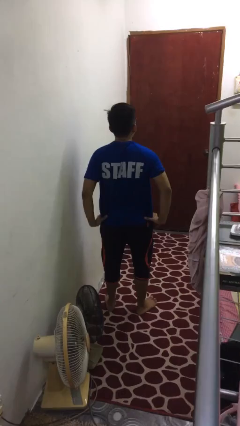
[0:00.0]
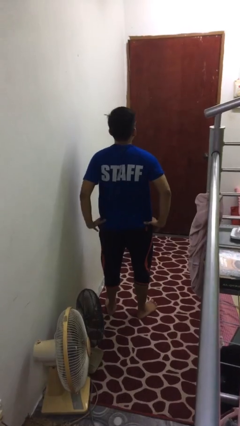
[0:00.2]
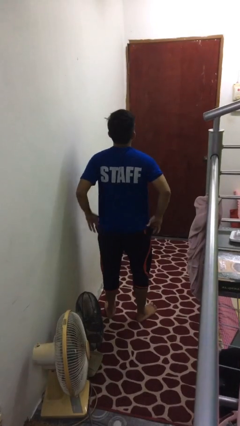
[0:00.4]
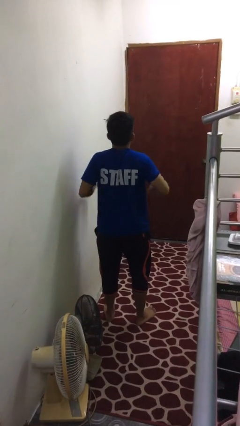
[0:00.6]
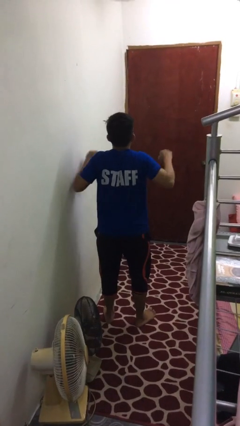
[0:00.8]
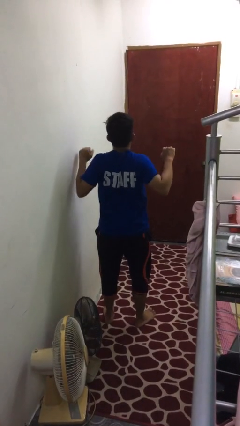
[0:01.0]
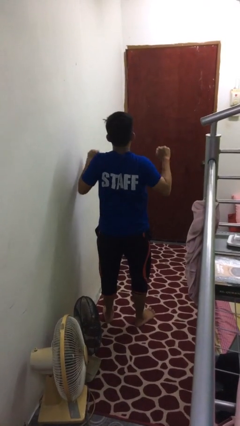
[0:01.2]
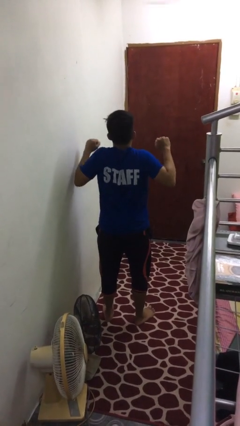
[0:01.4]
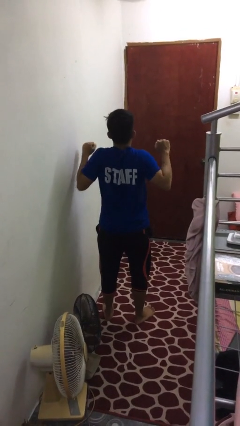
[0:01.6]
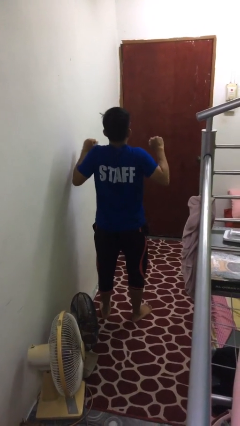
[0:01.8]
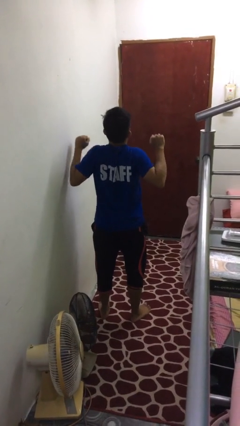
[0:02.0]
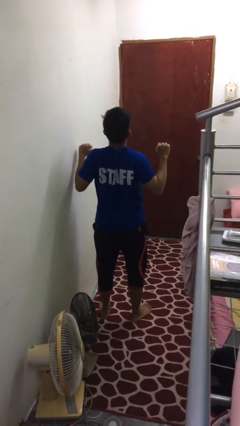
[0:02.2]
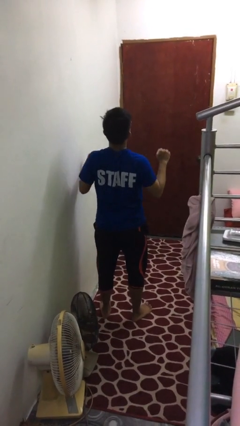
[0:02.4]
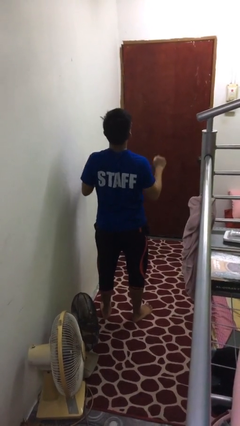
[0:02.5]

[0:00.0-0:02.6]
person stretches arms to side

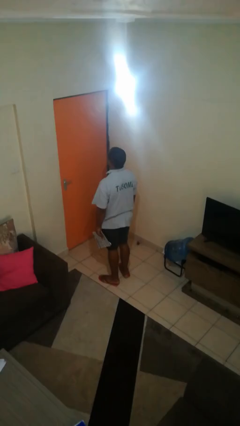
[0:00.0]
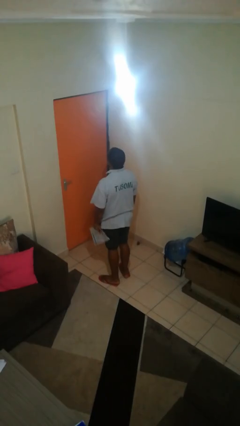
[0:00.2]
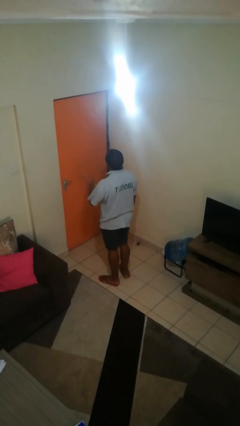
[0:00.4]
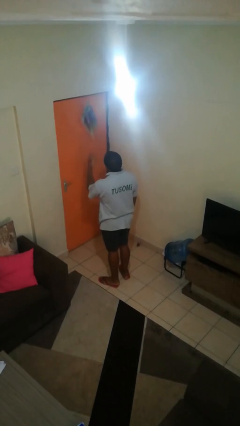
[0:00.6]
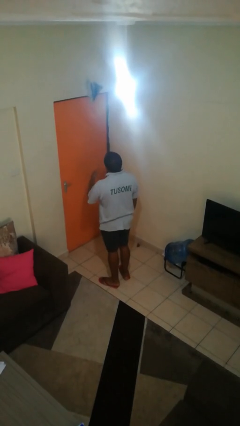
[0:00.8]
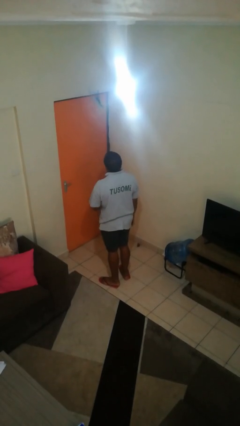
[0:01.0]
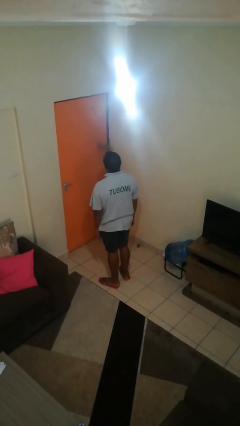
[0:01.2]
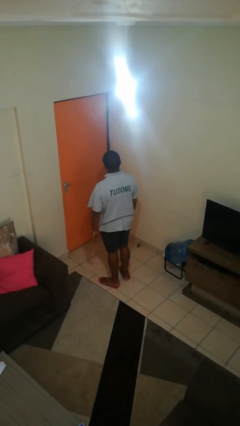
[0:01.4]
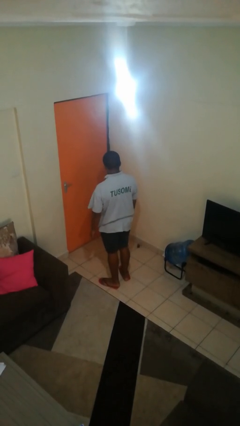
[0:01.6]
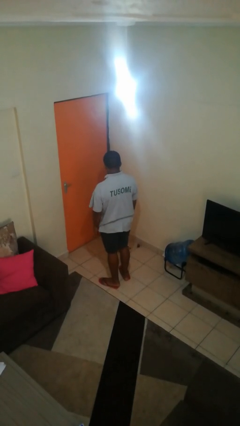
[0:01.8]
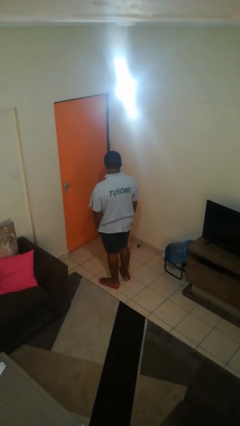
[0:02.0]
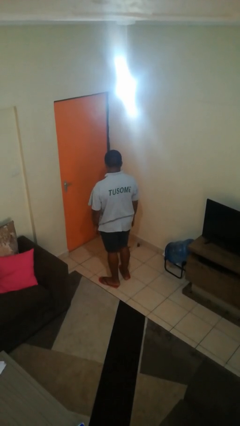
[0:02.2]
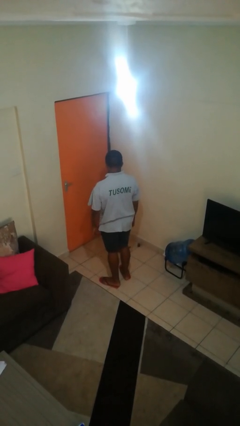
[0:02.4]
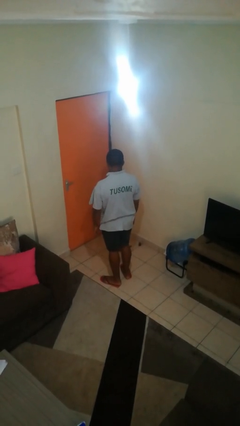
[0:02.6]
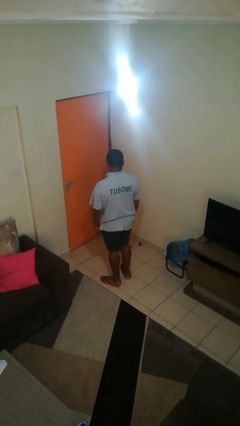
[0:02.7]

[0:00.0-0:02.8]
person throws object into air

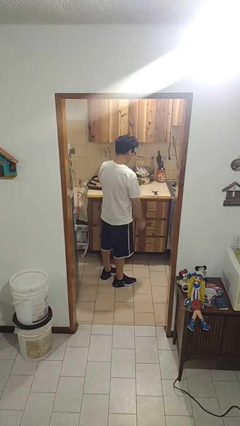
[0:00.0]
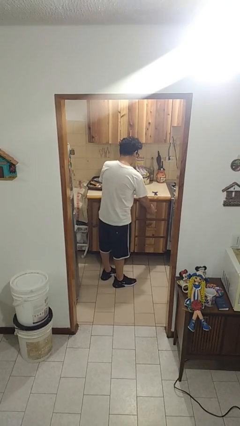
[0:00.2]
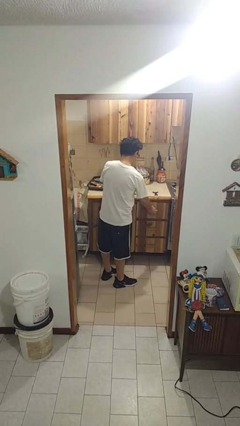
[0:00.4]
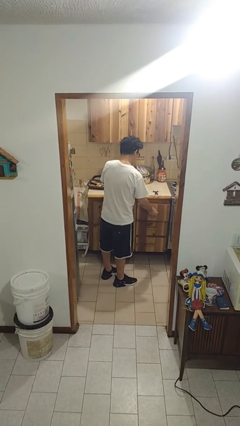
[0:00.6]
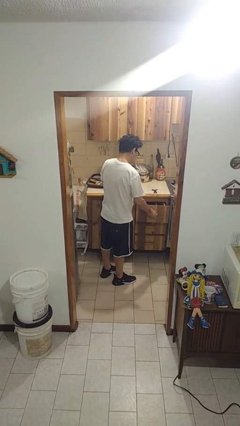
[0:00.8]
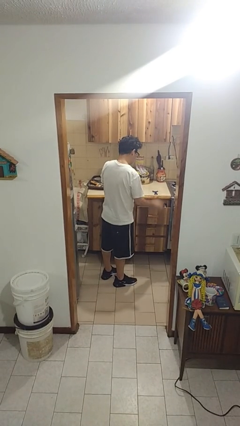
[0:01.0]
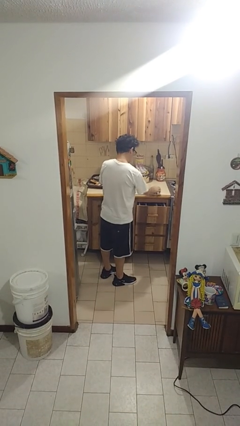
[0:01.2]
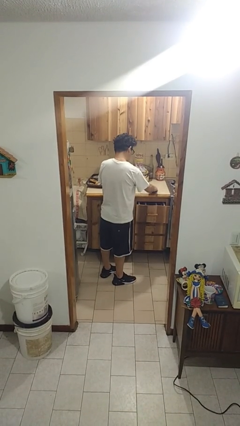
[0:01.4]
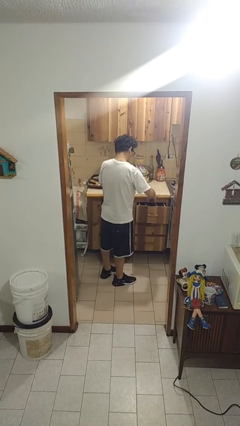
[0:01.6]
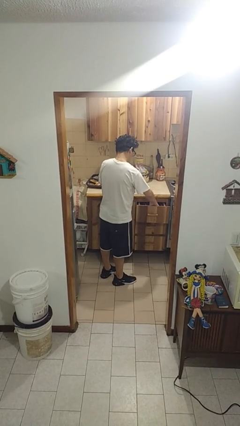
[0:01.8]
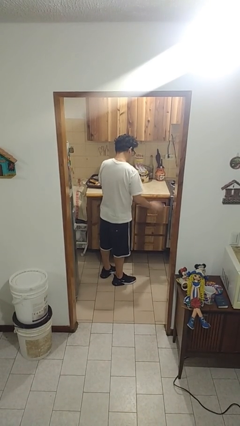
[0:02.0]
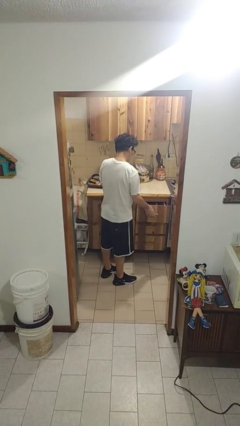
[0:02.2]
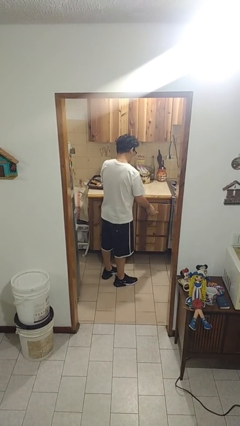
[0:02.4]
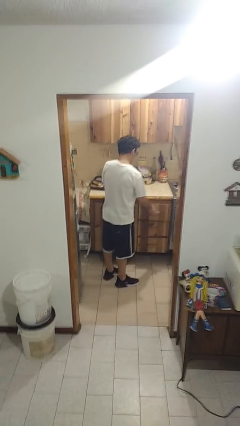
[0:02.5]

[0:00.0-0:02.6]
person puts object into kitchen drawer

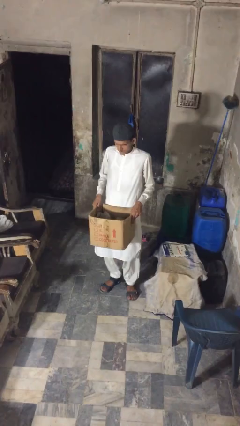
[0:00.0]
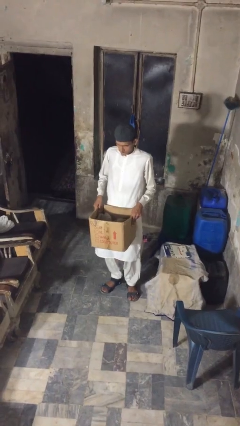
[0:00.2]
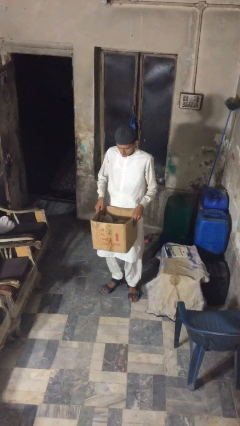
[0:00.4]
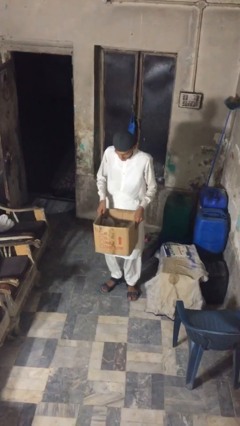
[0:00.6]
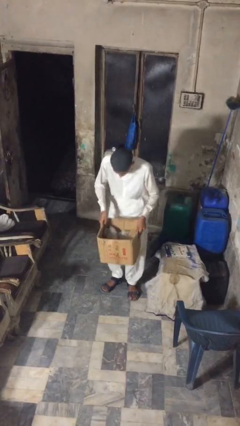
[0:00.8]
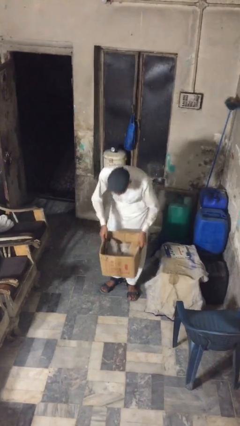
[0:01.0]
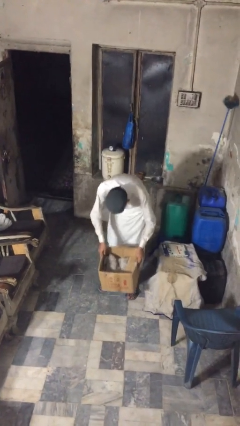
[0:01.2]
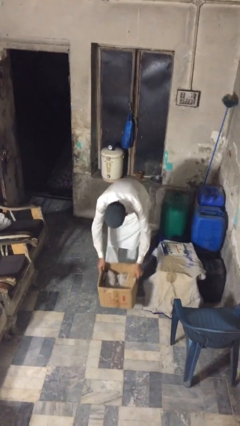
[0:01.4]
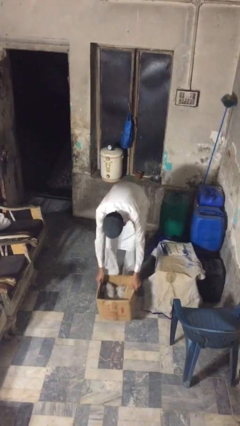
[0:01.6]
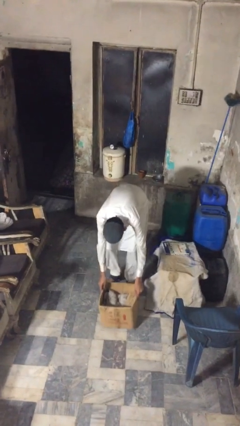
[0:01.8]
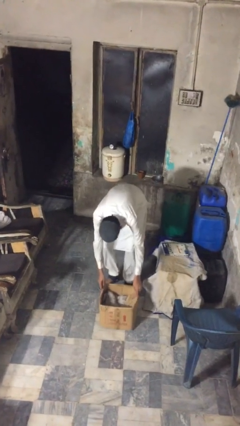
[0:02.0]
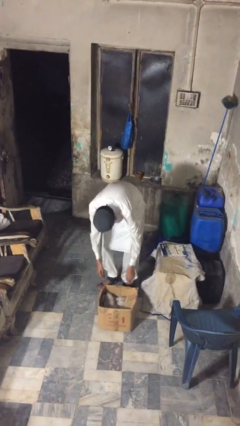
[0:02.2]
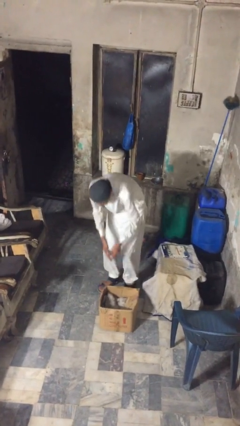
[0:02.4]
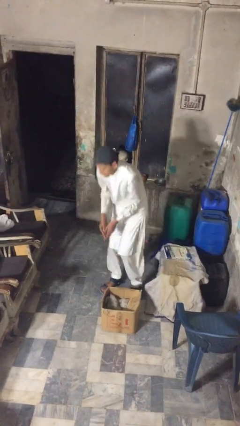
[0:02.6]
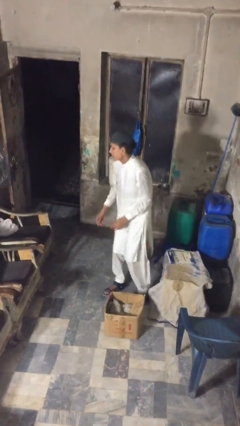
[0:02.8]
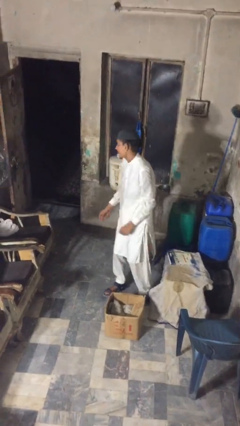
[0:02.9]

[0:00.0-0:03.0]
person puts down object on floor

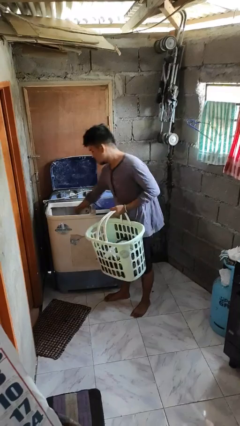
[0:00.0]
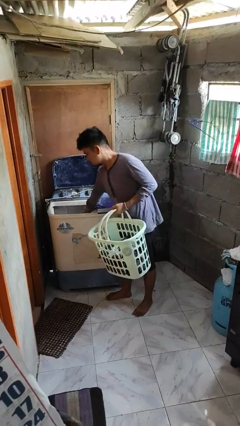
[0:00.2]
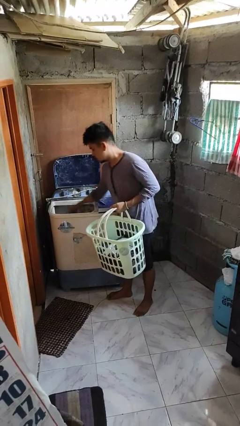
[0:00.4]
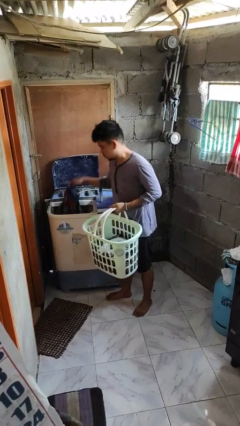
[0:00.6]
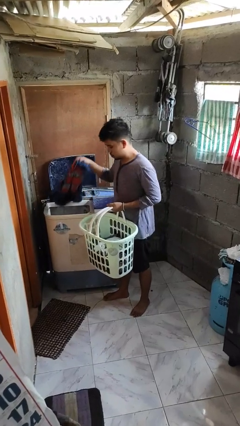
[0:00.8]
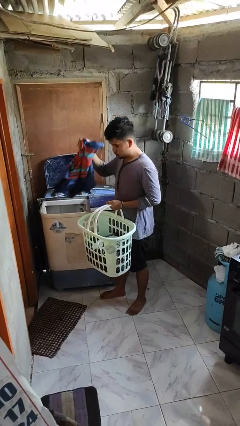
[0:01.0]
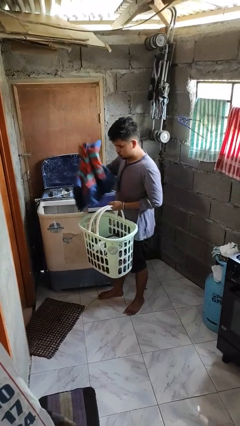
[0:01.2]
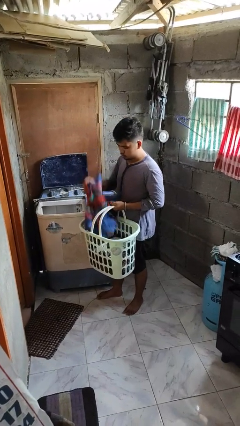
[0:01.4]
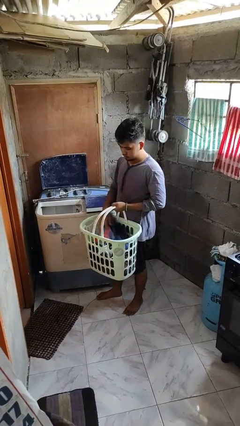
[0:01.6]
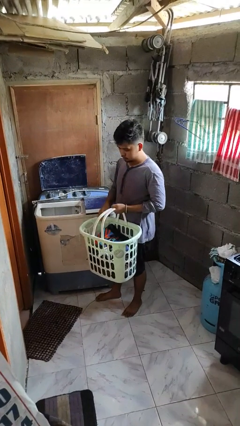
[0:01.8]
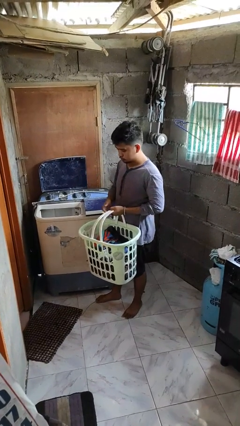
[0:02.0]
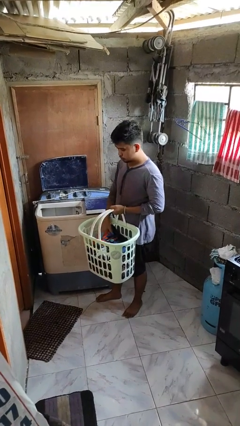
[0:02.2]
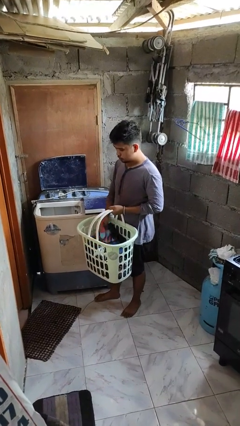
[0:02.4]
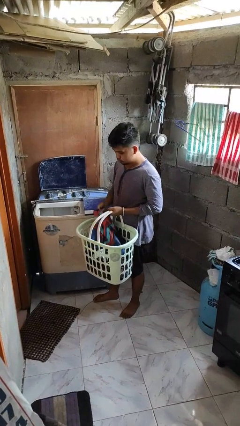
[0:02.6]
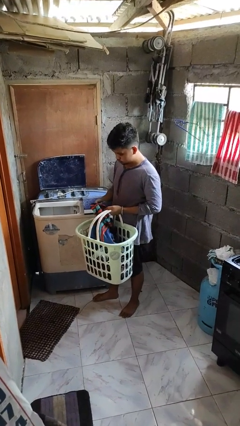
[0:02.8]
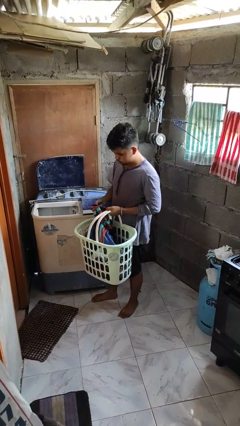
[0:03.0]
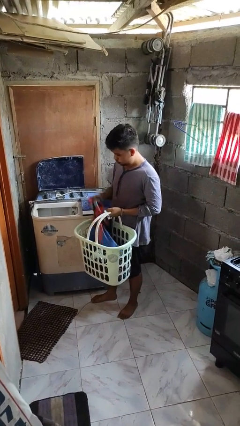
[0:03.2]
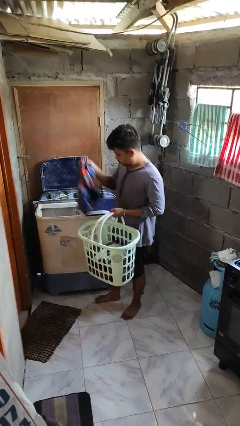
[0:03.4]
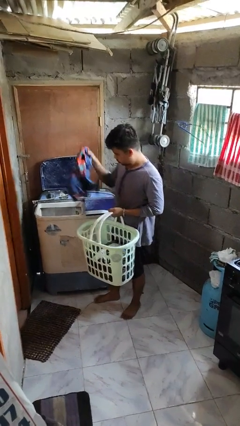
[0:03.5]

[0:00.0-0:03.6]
person unloads clotheswasher

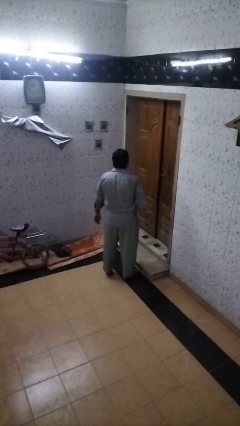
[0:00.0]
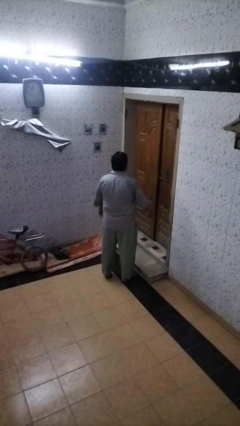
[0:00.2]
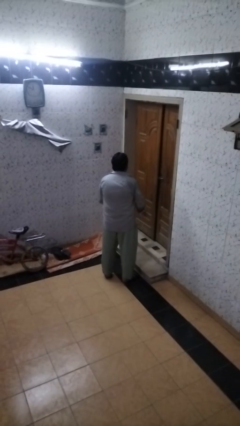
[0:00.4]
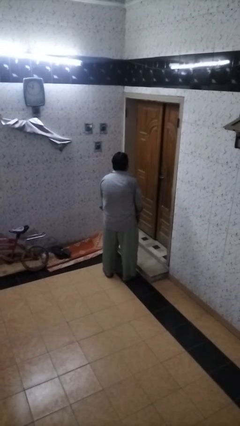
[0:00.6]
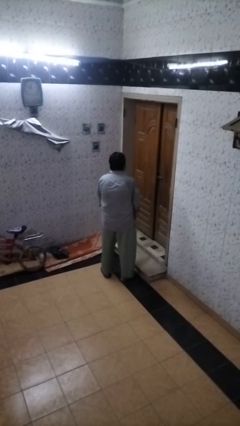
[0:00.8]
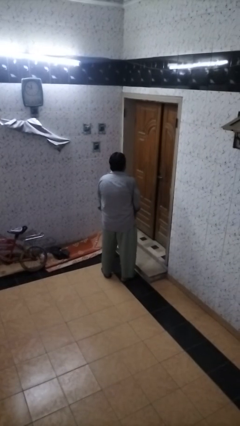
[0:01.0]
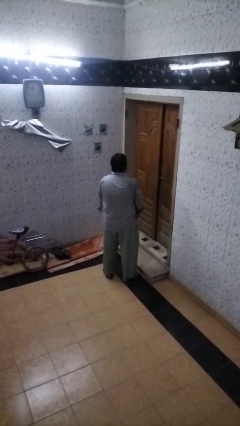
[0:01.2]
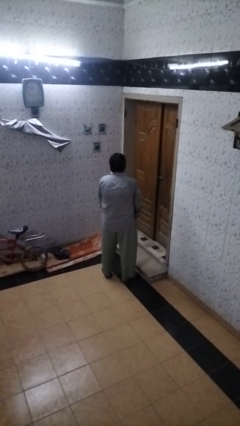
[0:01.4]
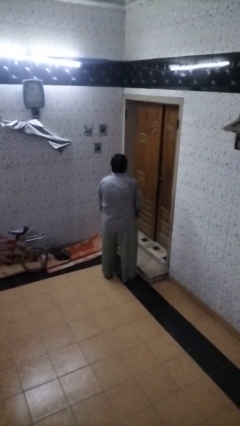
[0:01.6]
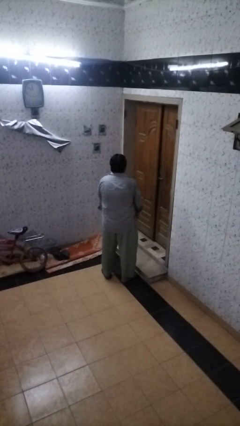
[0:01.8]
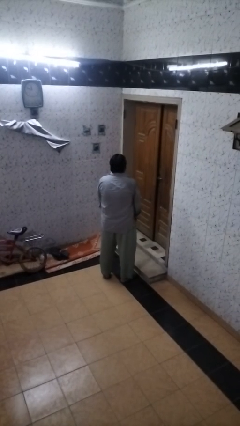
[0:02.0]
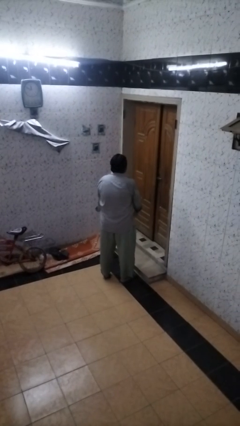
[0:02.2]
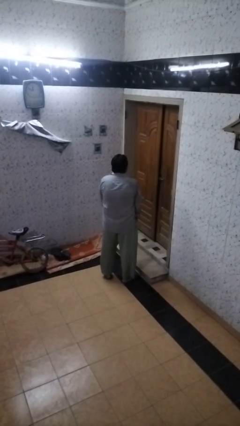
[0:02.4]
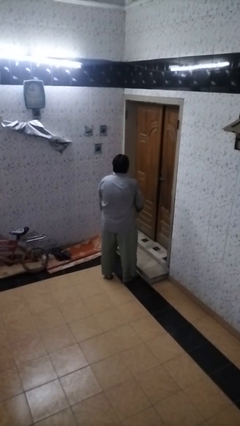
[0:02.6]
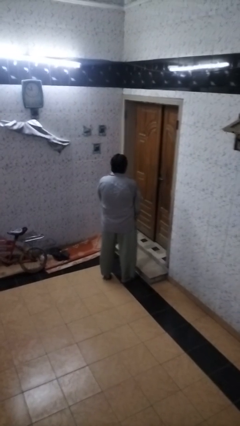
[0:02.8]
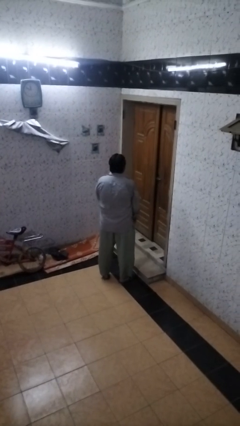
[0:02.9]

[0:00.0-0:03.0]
person slaps hands on thighs
